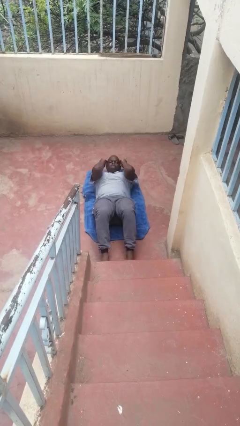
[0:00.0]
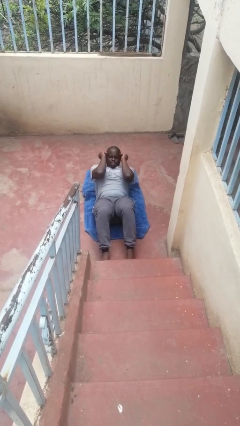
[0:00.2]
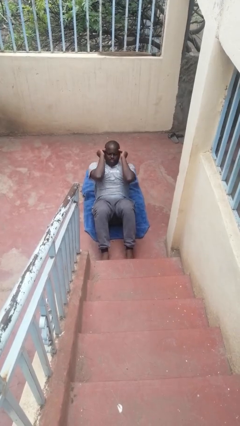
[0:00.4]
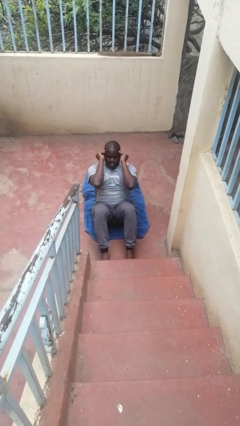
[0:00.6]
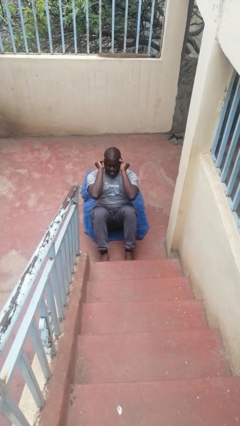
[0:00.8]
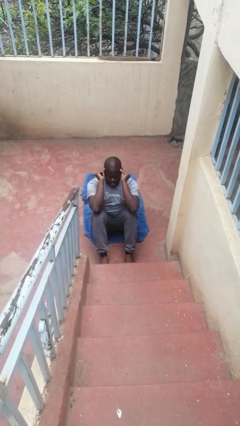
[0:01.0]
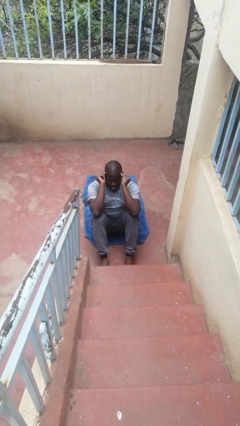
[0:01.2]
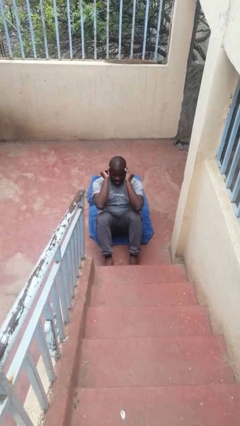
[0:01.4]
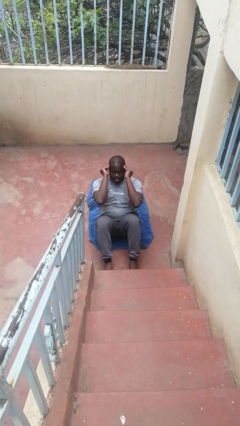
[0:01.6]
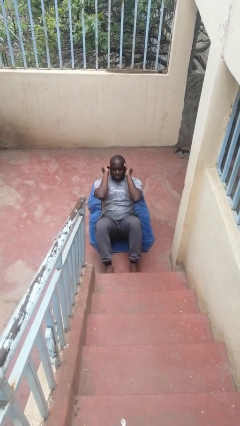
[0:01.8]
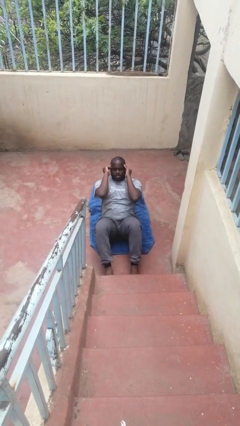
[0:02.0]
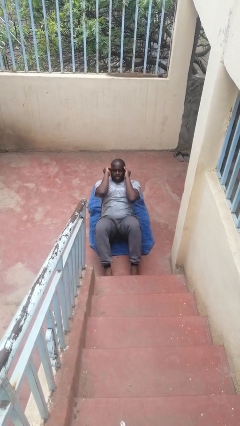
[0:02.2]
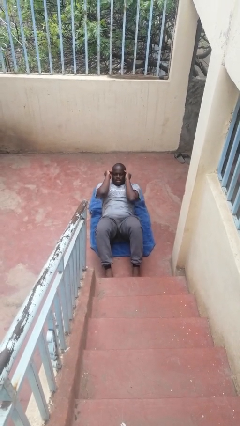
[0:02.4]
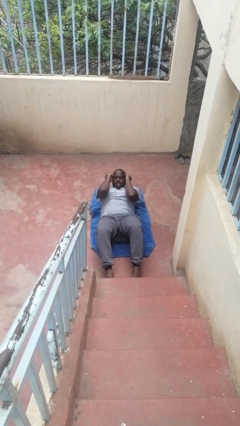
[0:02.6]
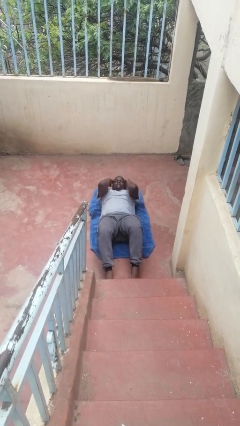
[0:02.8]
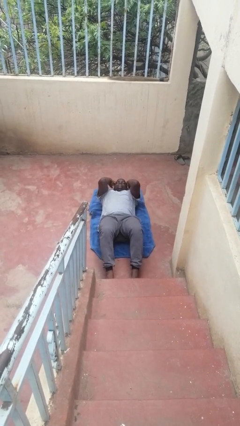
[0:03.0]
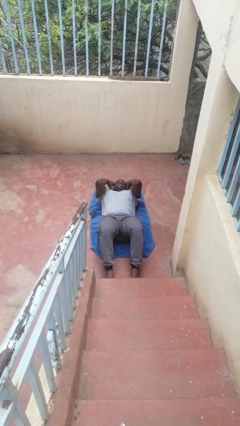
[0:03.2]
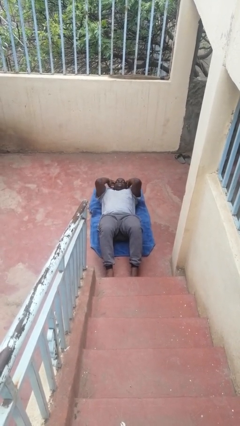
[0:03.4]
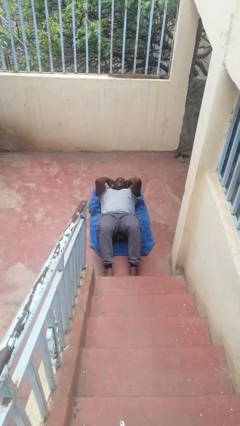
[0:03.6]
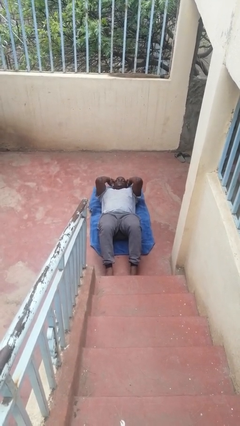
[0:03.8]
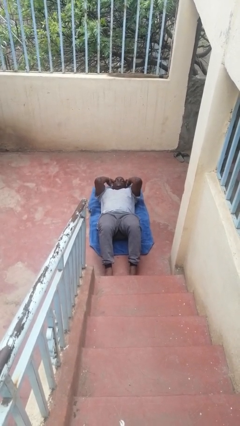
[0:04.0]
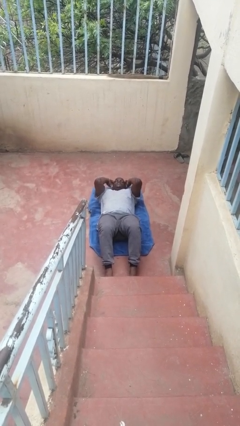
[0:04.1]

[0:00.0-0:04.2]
person exercises with situp

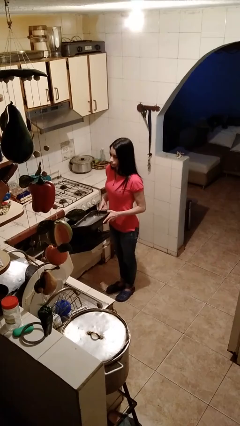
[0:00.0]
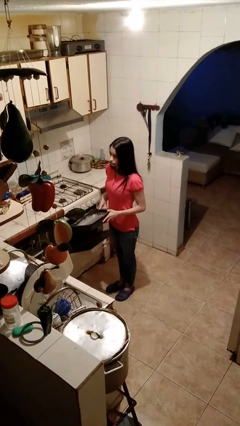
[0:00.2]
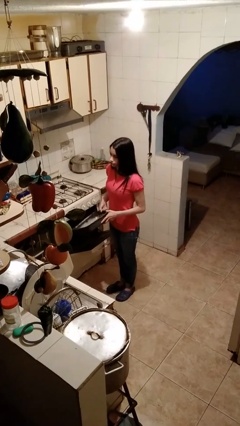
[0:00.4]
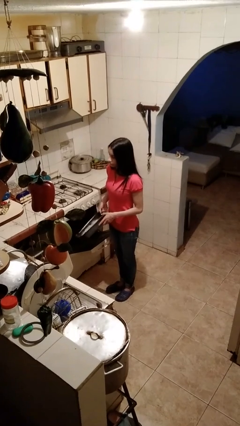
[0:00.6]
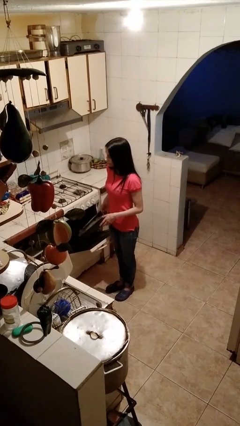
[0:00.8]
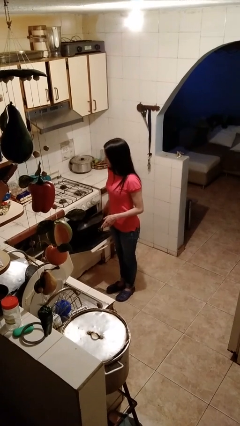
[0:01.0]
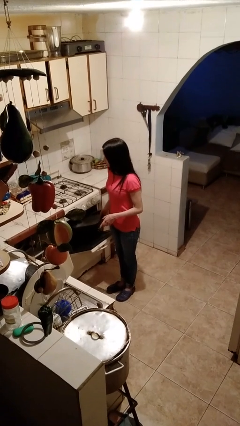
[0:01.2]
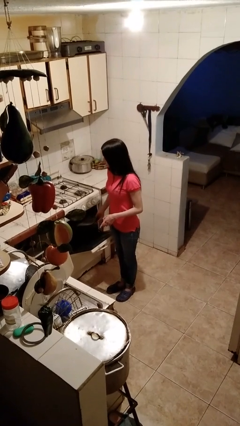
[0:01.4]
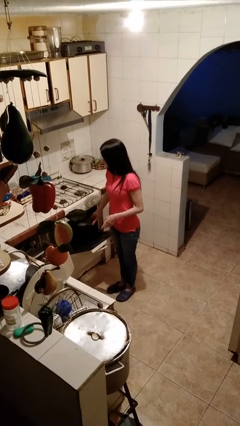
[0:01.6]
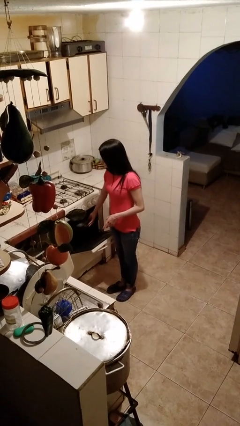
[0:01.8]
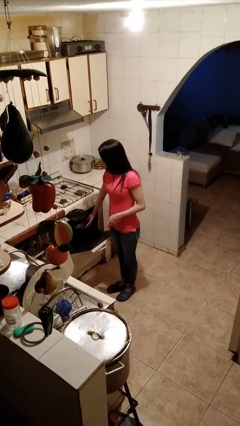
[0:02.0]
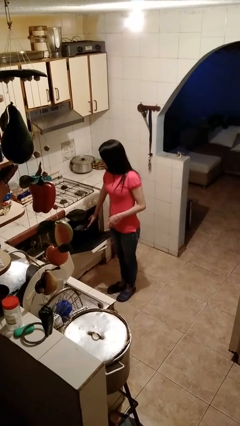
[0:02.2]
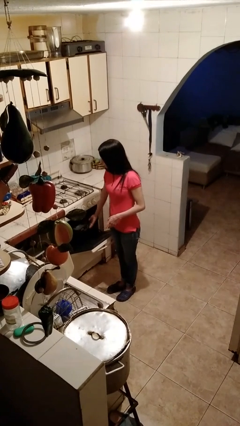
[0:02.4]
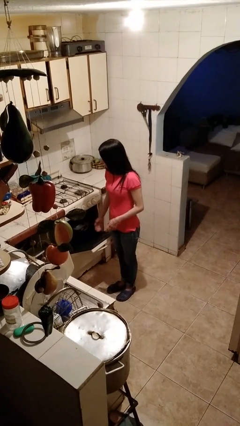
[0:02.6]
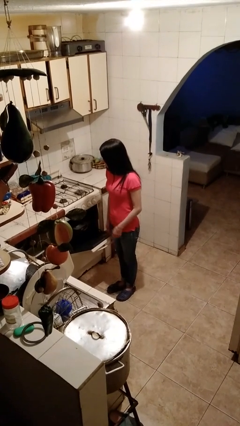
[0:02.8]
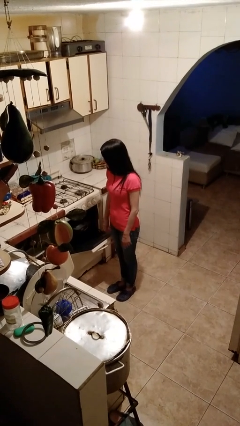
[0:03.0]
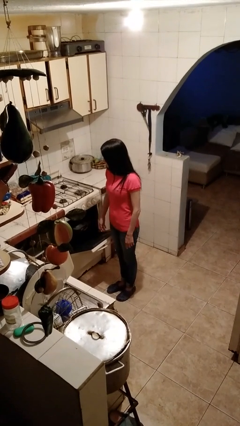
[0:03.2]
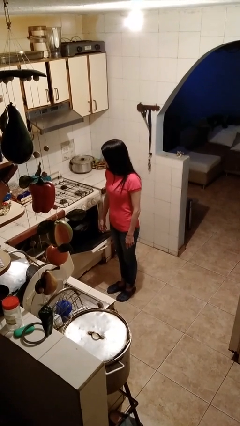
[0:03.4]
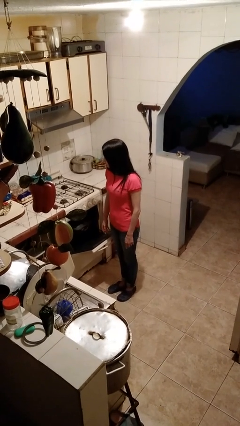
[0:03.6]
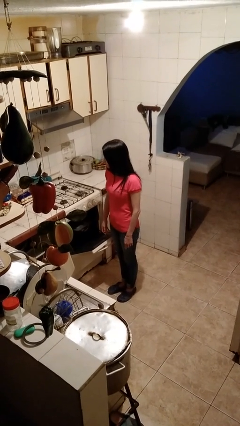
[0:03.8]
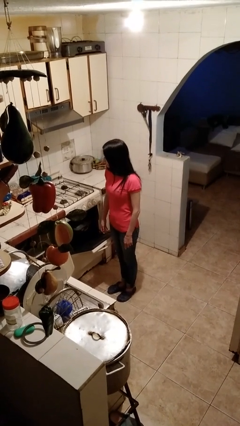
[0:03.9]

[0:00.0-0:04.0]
person puts object into oven

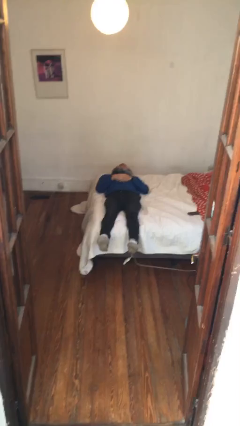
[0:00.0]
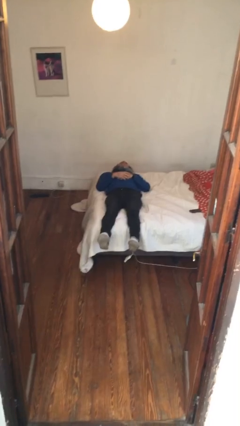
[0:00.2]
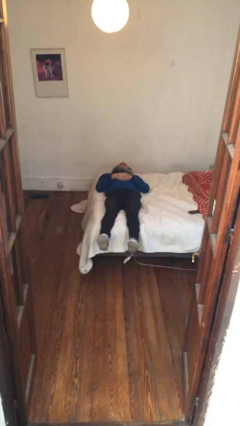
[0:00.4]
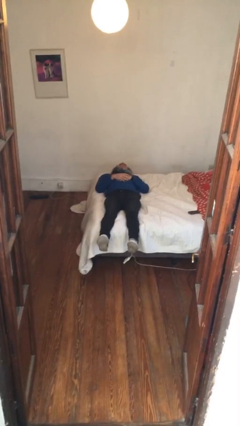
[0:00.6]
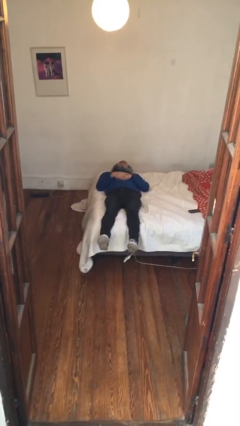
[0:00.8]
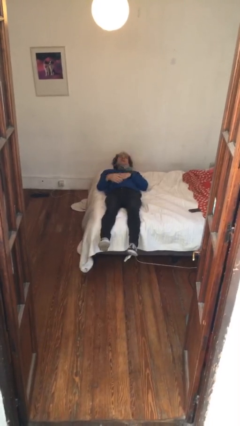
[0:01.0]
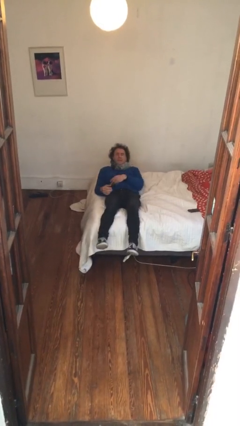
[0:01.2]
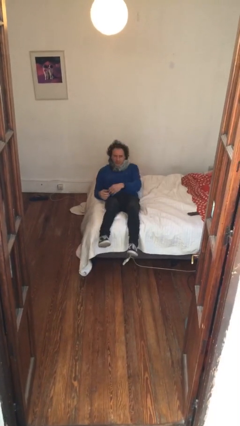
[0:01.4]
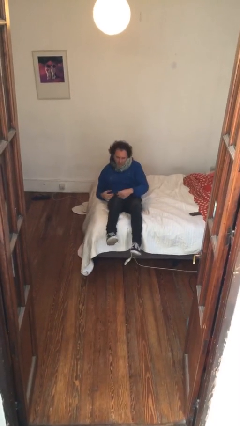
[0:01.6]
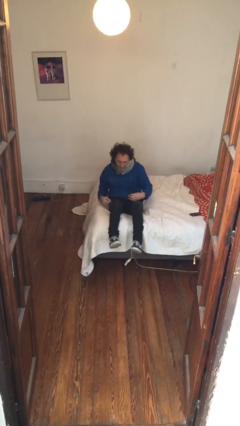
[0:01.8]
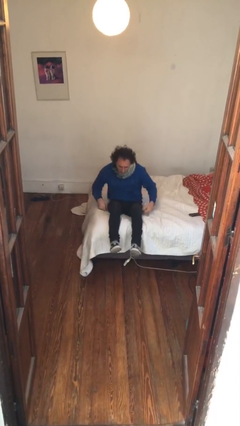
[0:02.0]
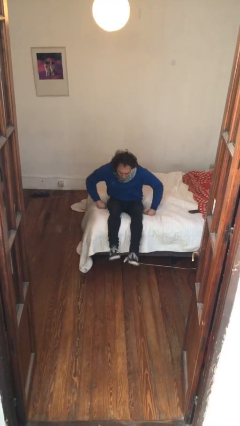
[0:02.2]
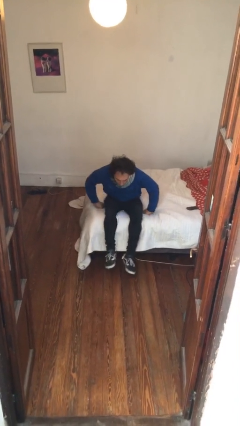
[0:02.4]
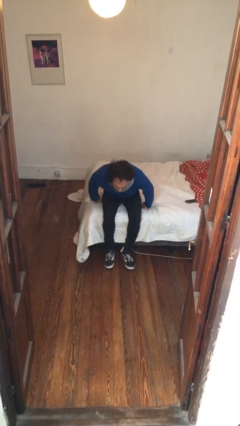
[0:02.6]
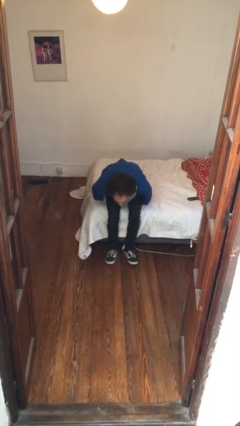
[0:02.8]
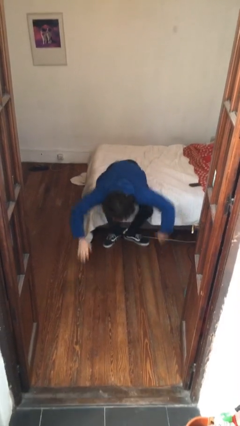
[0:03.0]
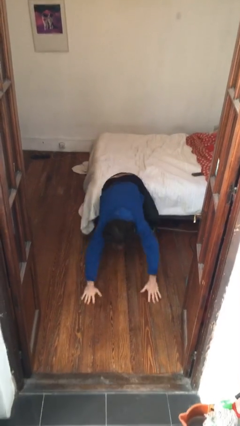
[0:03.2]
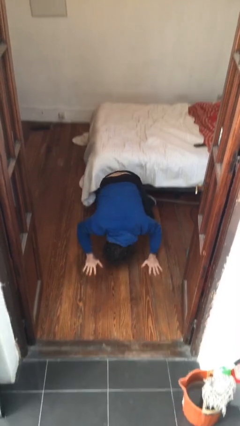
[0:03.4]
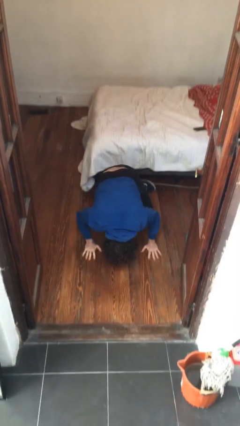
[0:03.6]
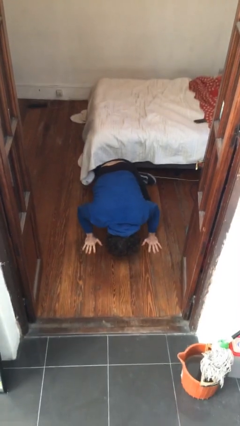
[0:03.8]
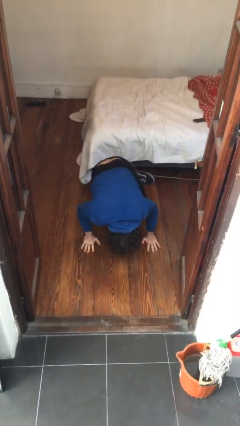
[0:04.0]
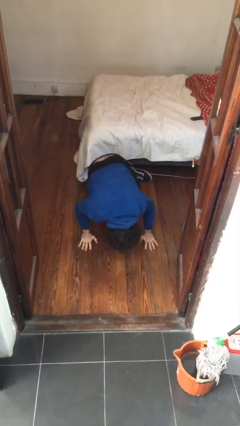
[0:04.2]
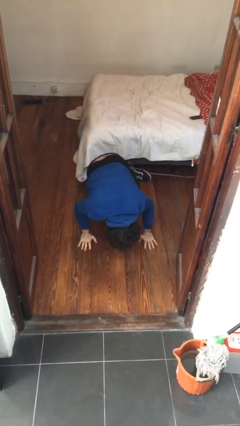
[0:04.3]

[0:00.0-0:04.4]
person falls from bed

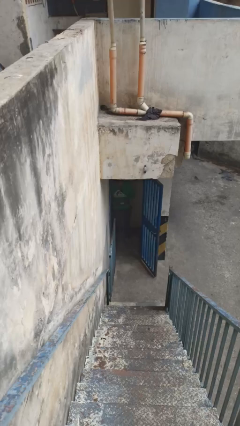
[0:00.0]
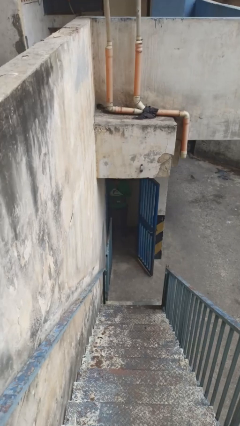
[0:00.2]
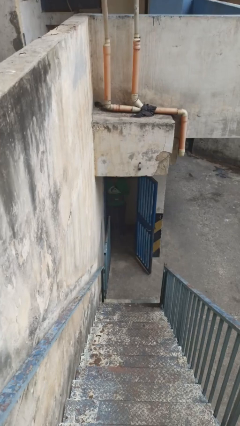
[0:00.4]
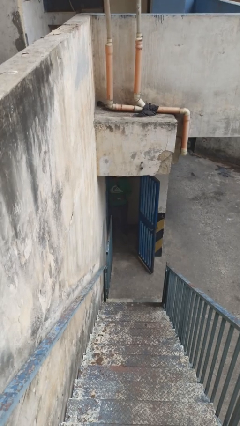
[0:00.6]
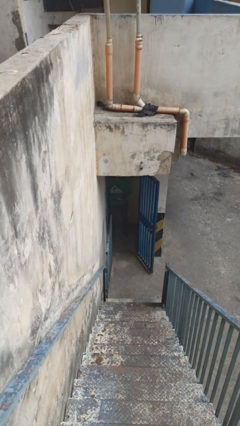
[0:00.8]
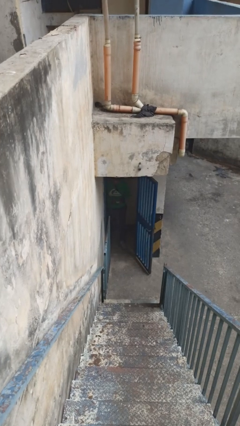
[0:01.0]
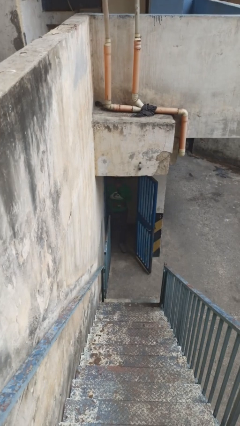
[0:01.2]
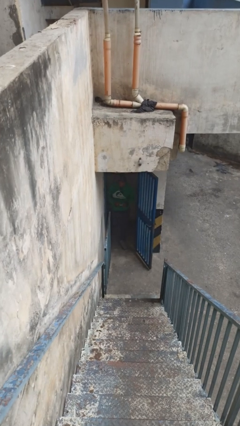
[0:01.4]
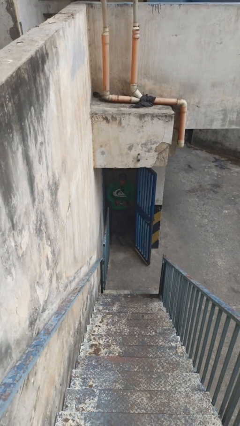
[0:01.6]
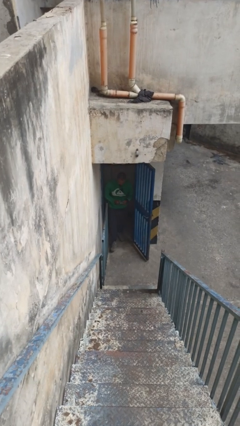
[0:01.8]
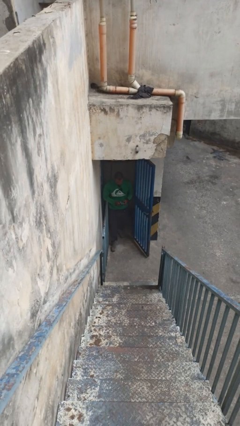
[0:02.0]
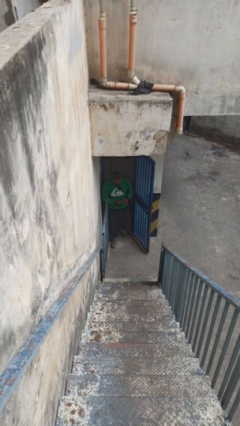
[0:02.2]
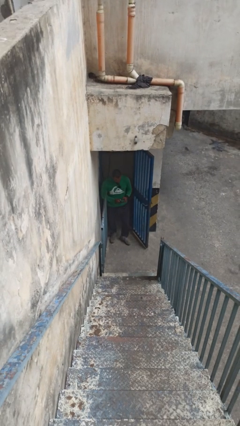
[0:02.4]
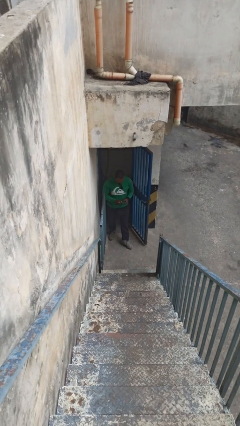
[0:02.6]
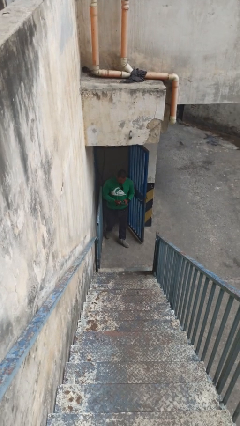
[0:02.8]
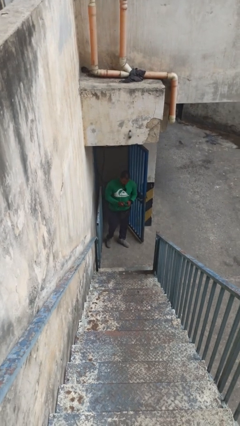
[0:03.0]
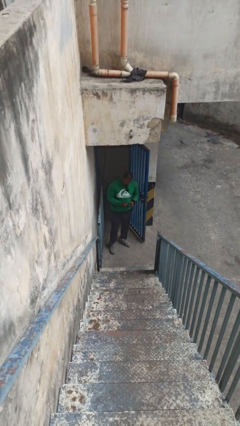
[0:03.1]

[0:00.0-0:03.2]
person enters scene through structure

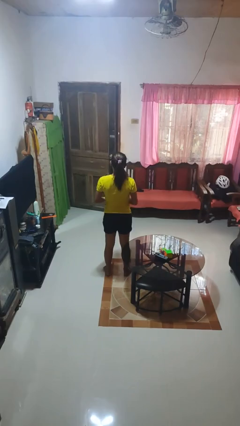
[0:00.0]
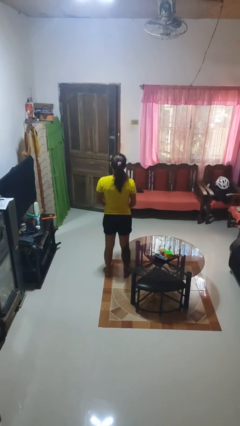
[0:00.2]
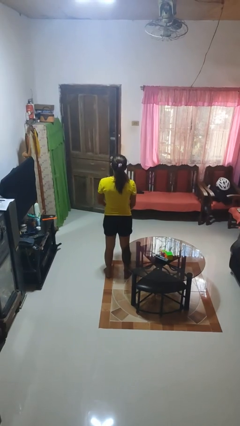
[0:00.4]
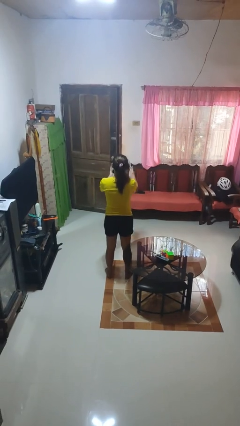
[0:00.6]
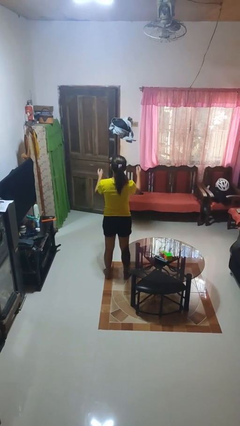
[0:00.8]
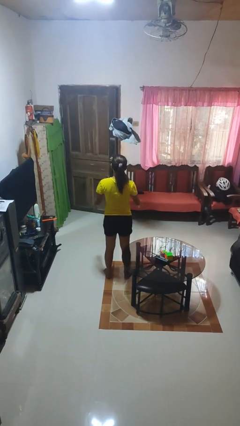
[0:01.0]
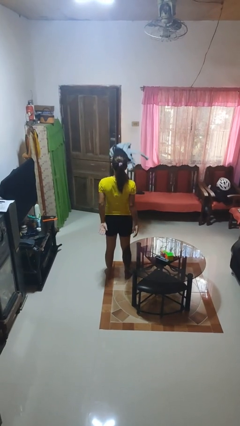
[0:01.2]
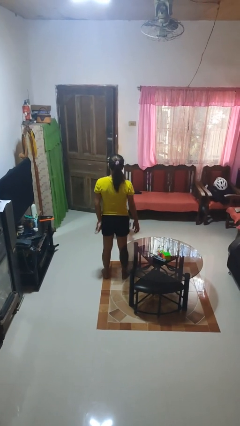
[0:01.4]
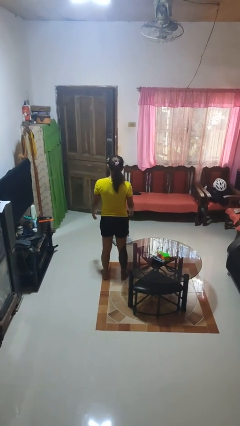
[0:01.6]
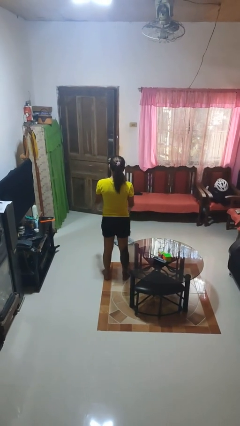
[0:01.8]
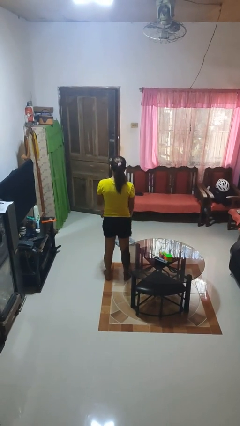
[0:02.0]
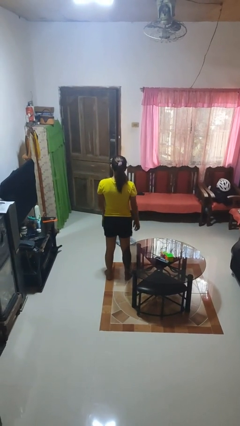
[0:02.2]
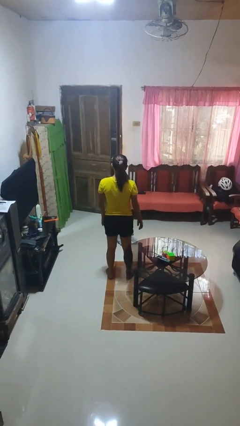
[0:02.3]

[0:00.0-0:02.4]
person throws object into air
